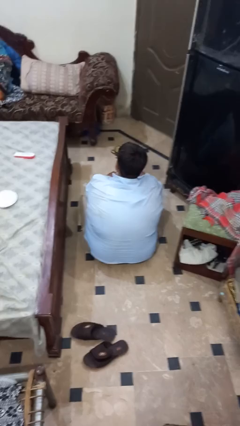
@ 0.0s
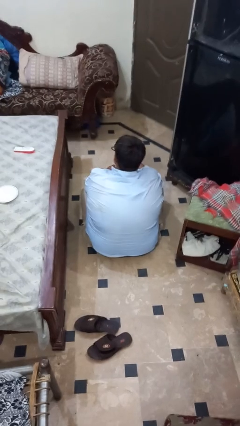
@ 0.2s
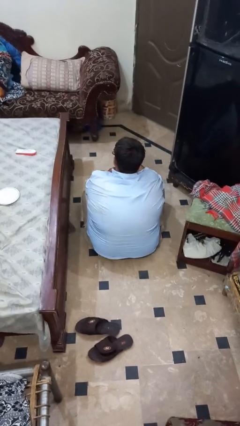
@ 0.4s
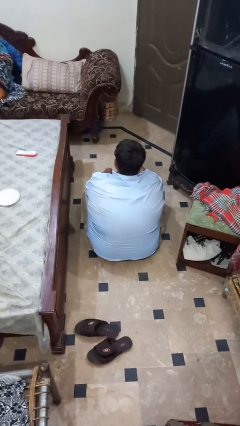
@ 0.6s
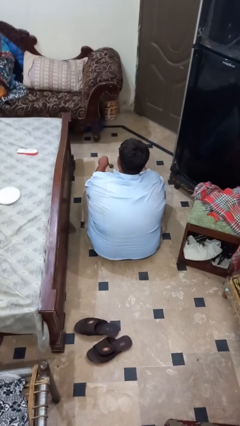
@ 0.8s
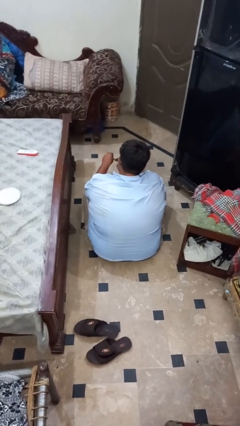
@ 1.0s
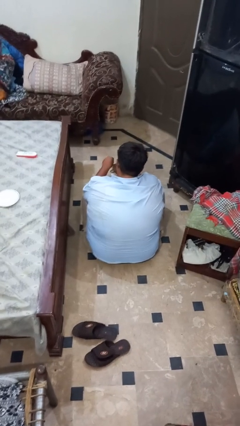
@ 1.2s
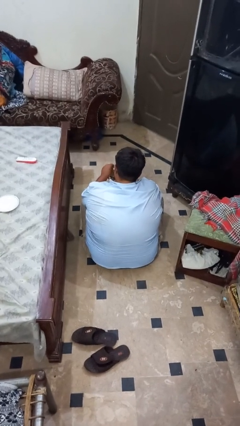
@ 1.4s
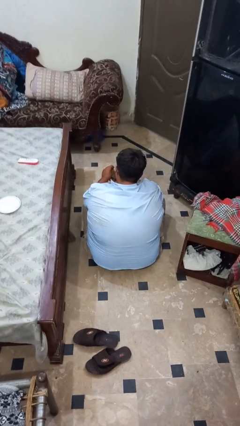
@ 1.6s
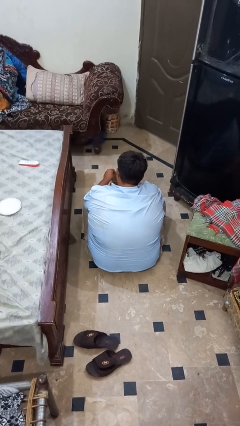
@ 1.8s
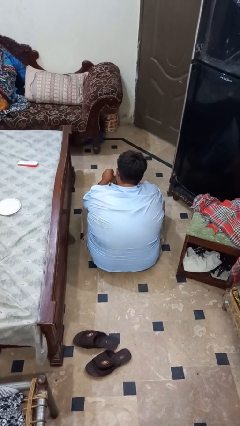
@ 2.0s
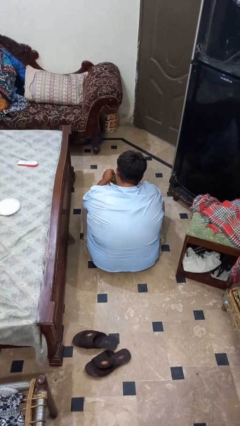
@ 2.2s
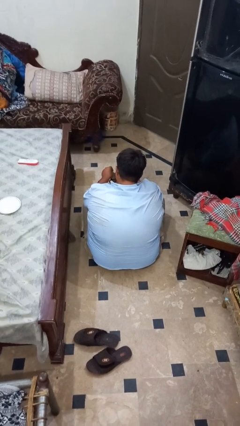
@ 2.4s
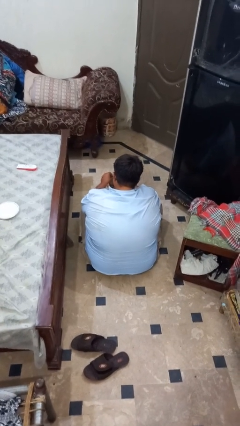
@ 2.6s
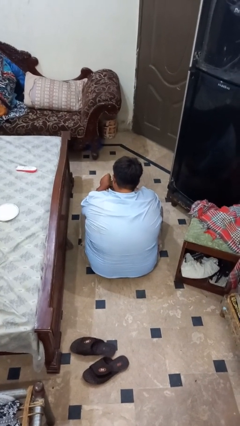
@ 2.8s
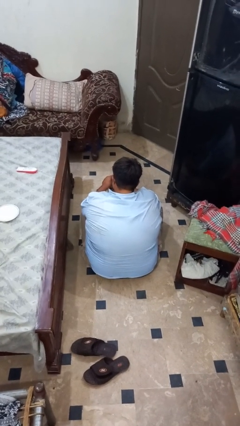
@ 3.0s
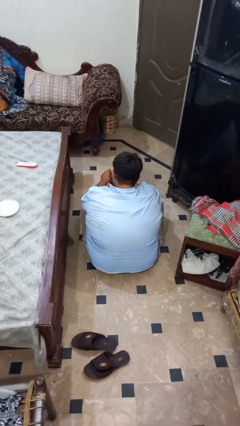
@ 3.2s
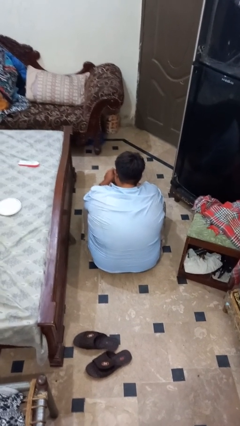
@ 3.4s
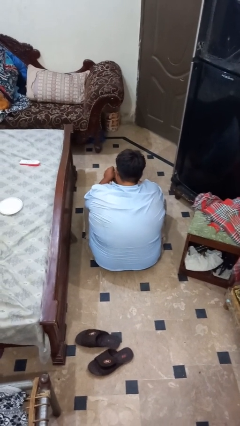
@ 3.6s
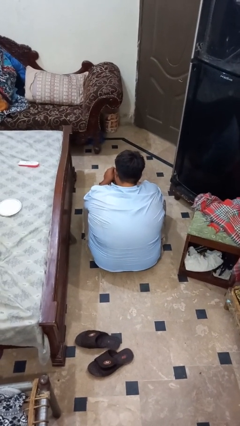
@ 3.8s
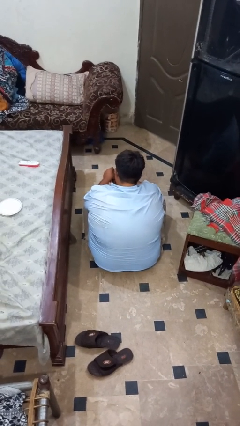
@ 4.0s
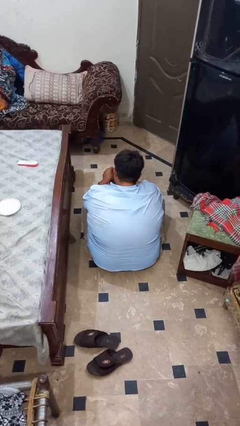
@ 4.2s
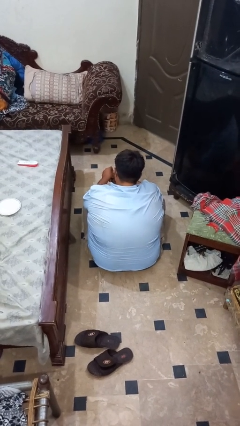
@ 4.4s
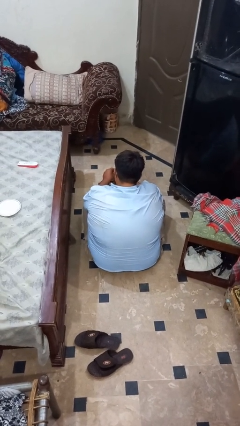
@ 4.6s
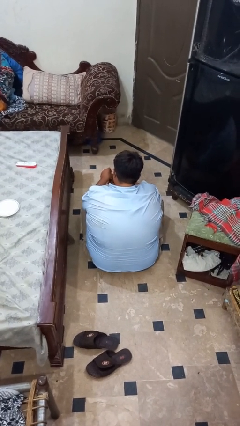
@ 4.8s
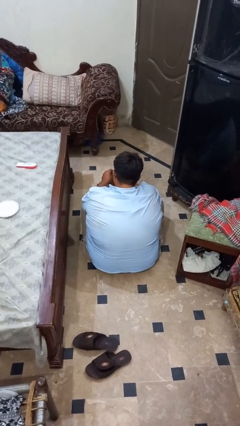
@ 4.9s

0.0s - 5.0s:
person stirs mug

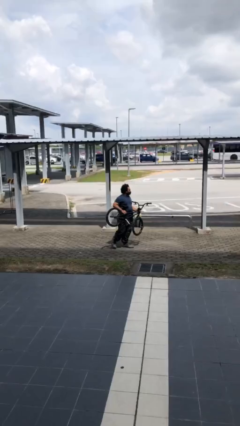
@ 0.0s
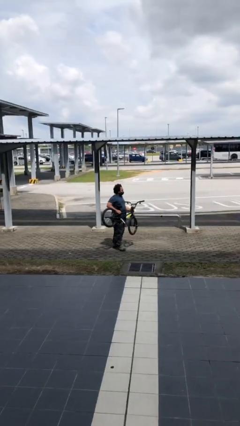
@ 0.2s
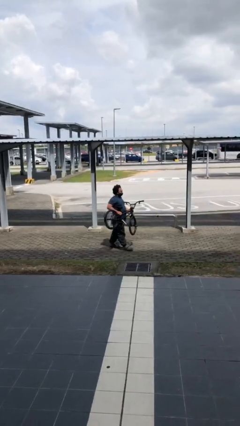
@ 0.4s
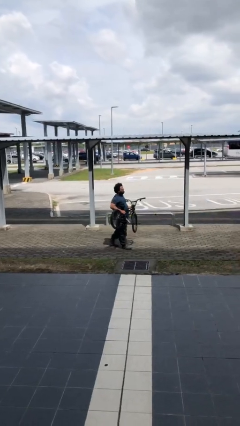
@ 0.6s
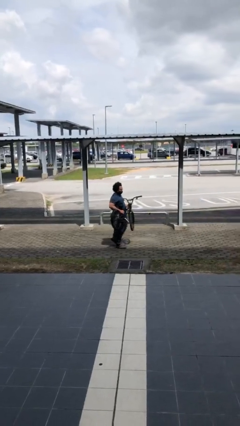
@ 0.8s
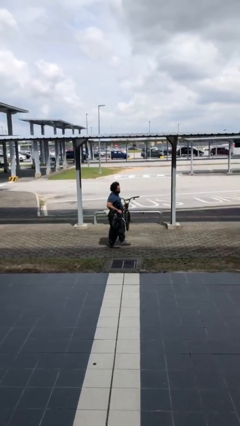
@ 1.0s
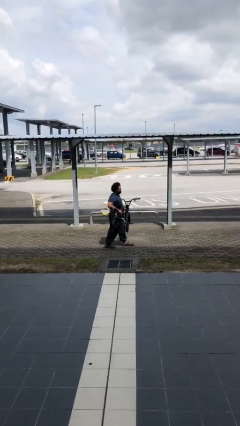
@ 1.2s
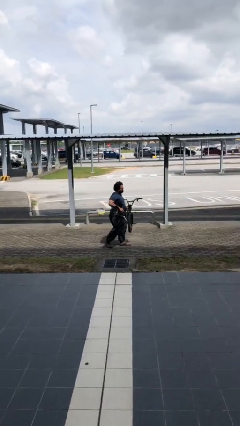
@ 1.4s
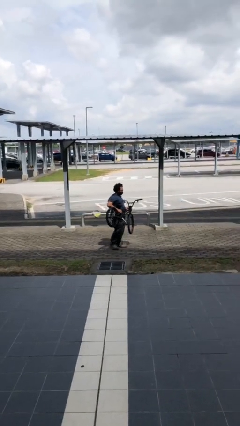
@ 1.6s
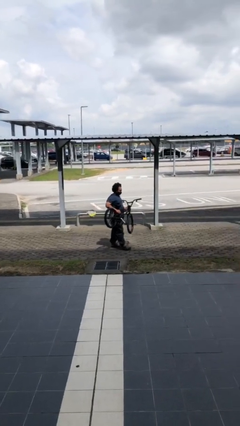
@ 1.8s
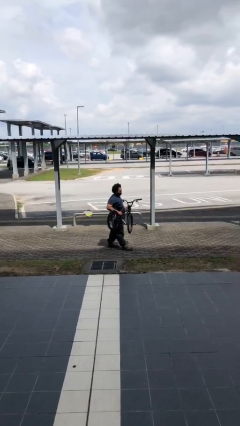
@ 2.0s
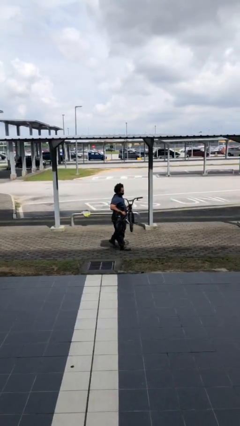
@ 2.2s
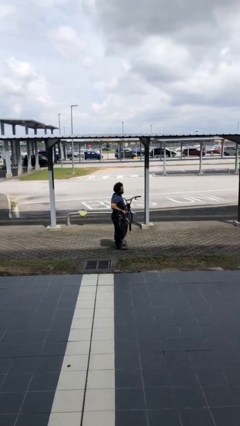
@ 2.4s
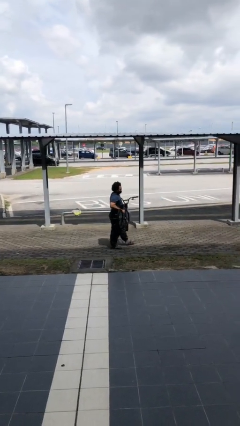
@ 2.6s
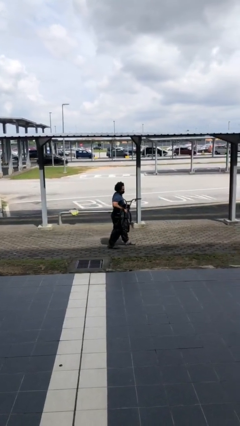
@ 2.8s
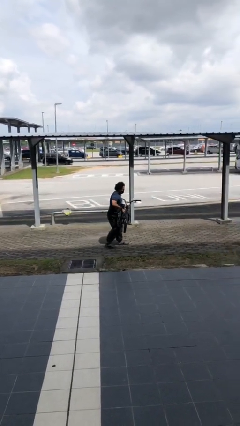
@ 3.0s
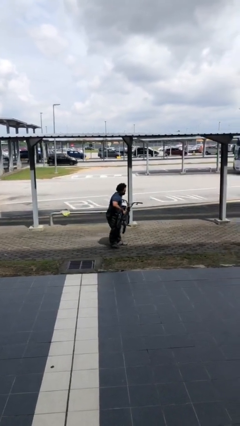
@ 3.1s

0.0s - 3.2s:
person carries heavy object

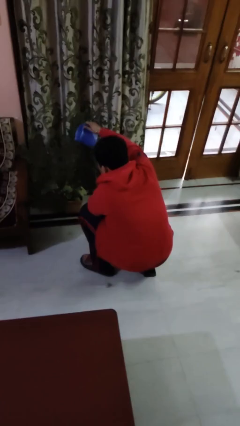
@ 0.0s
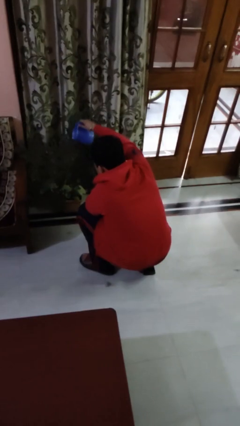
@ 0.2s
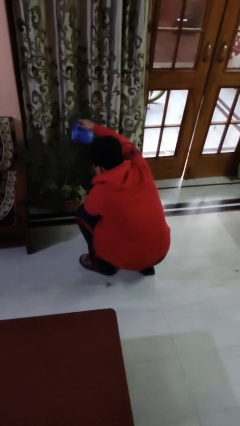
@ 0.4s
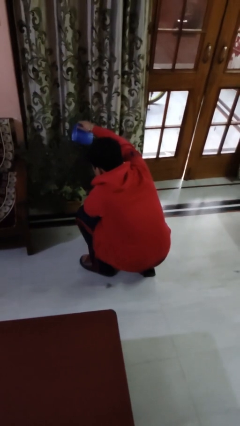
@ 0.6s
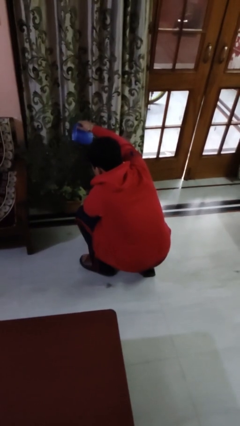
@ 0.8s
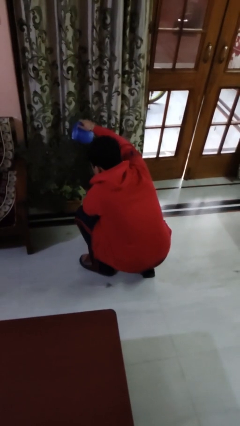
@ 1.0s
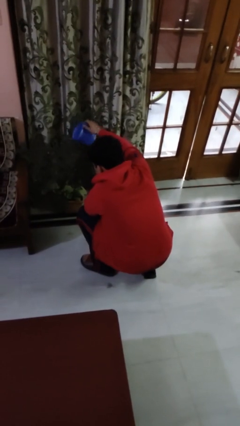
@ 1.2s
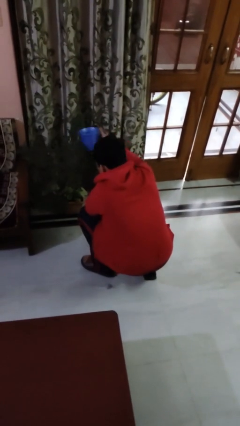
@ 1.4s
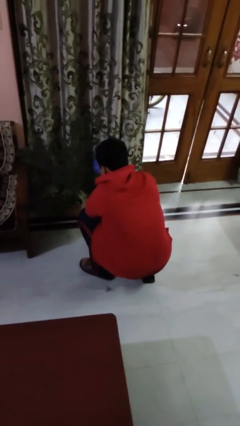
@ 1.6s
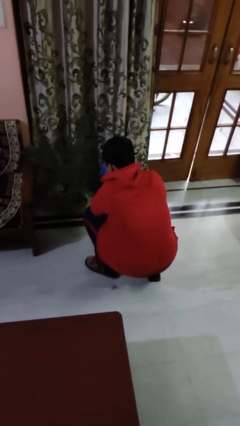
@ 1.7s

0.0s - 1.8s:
person waters houseplant

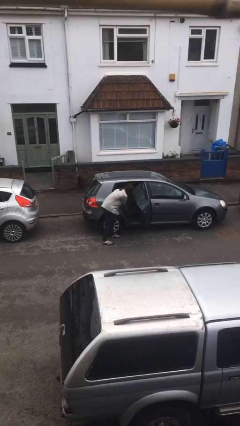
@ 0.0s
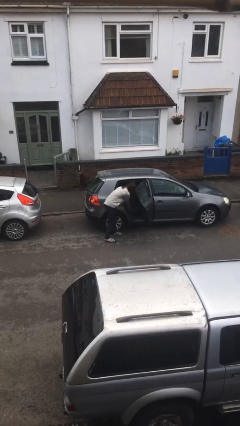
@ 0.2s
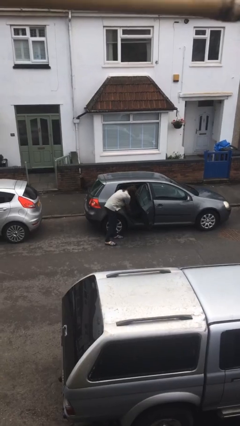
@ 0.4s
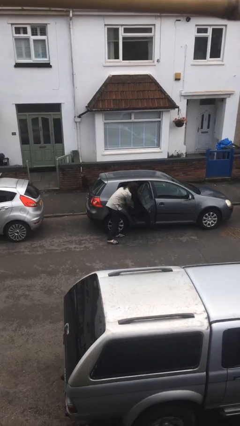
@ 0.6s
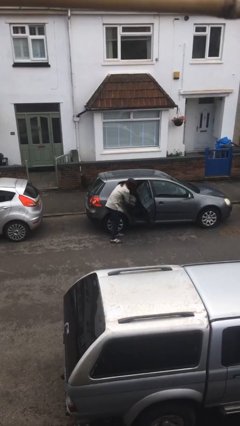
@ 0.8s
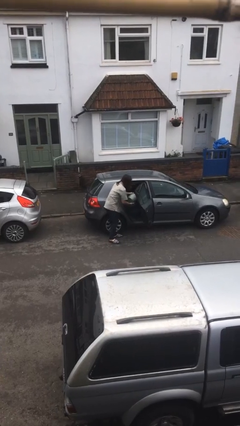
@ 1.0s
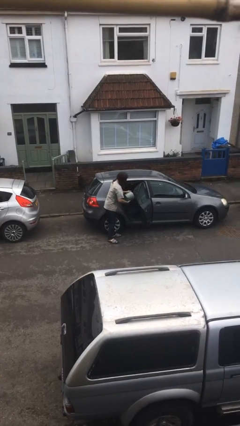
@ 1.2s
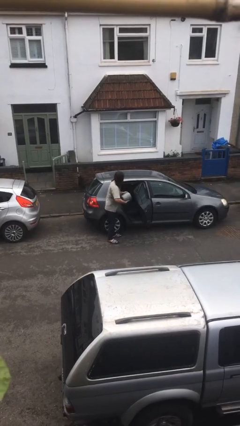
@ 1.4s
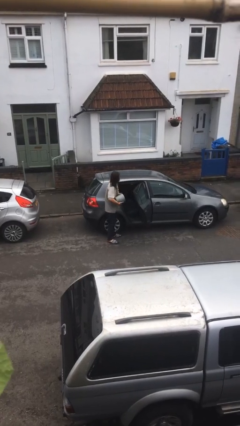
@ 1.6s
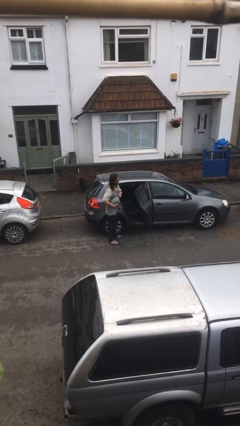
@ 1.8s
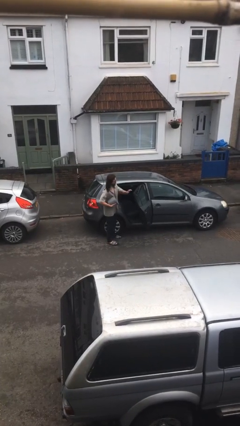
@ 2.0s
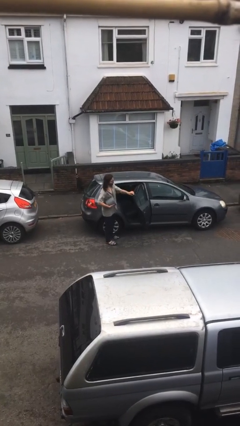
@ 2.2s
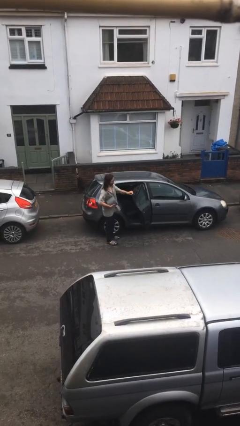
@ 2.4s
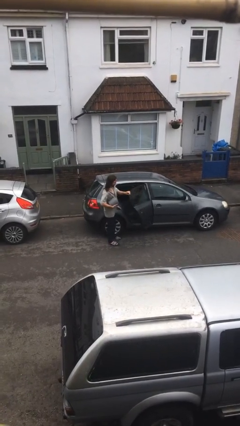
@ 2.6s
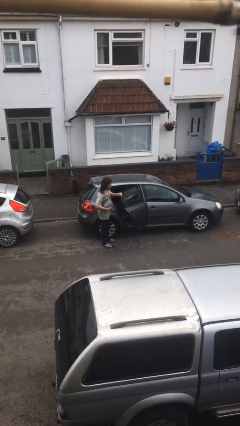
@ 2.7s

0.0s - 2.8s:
person unloads car

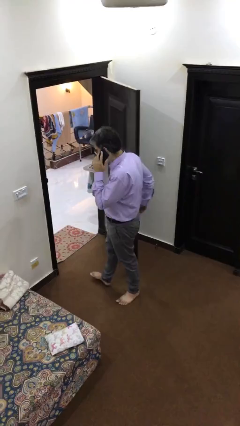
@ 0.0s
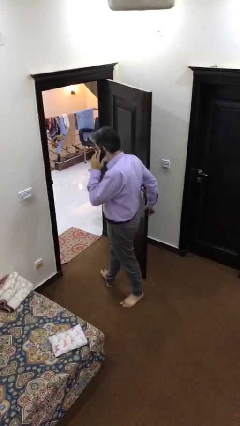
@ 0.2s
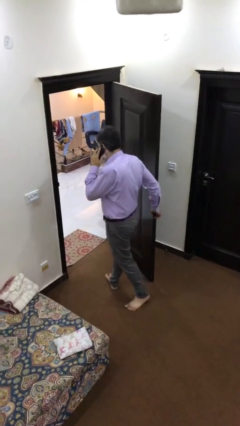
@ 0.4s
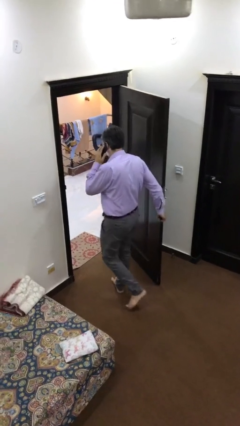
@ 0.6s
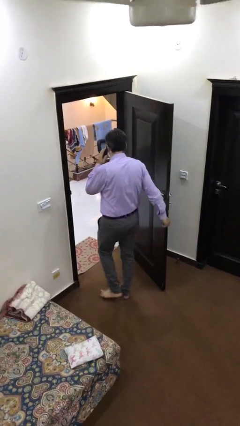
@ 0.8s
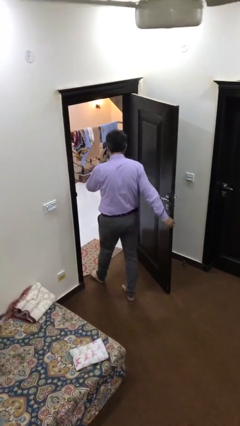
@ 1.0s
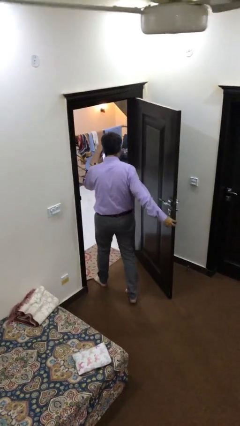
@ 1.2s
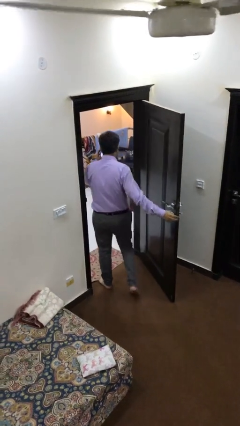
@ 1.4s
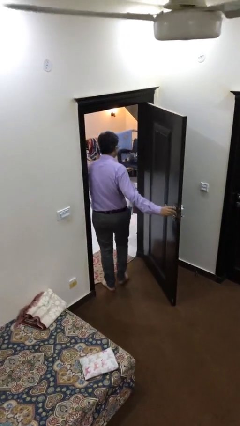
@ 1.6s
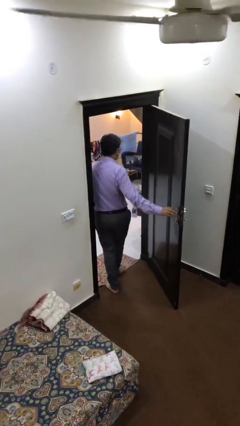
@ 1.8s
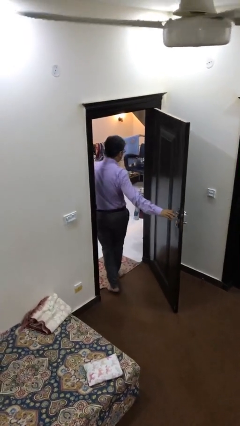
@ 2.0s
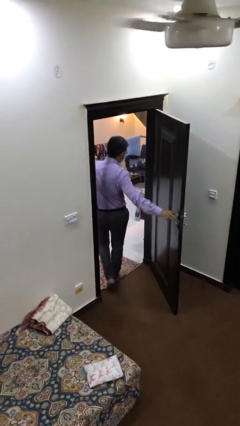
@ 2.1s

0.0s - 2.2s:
person exits scene through structure

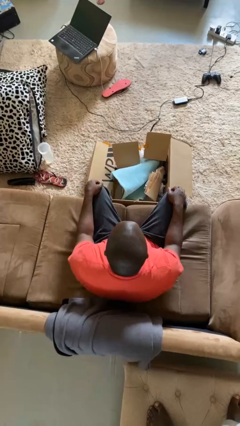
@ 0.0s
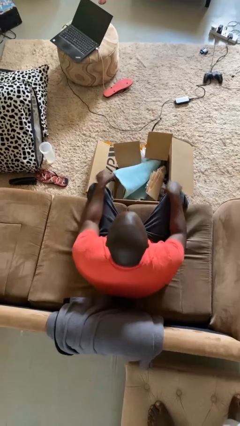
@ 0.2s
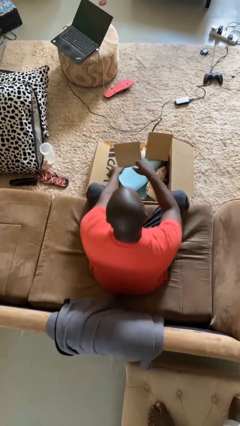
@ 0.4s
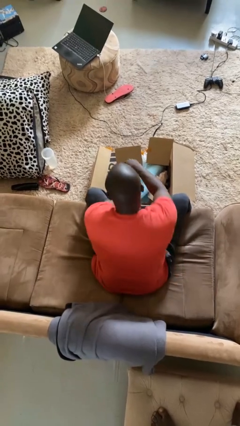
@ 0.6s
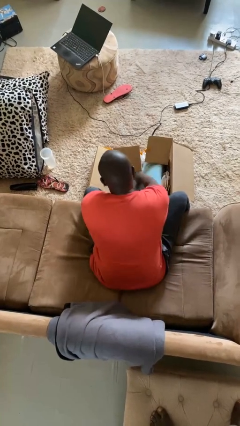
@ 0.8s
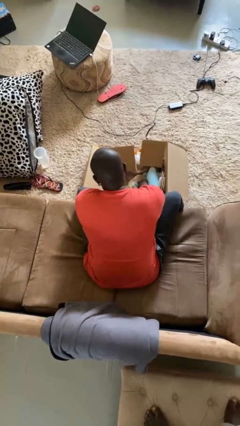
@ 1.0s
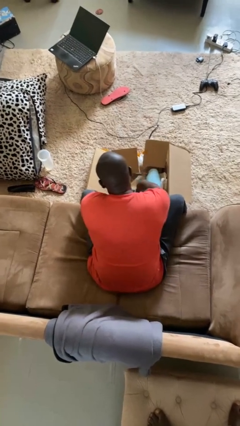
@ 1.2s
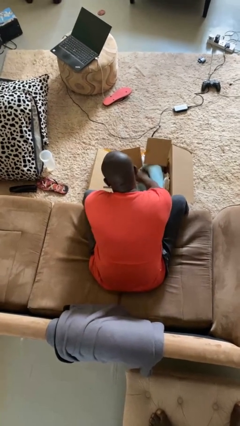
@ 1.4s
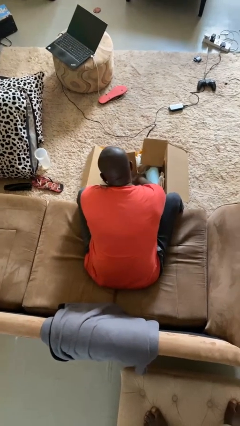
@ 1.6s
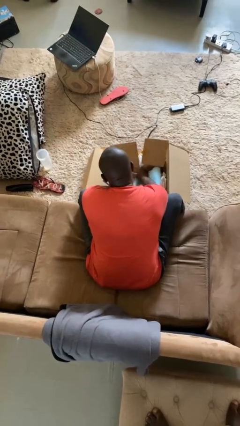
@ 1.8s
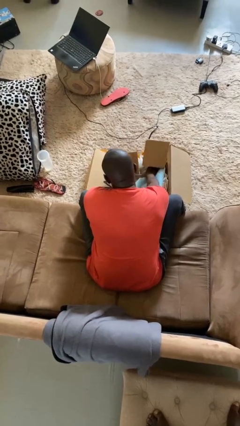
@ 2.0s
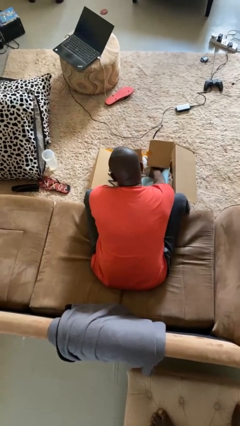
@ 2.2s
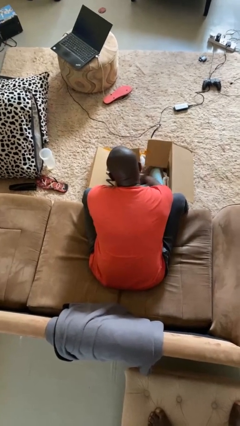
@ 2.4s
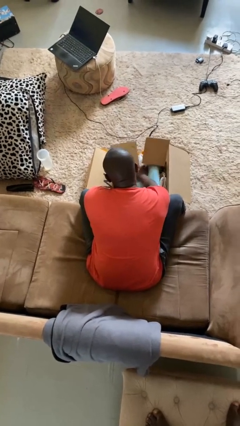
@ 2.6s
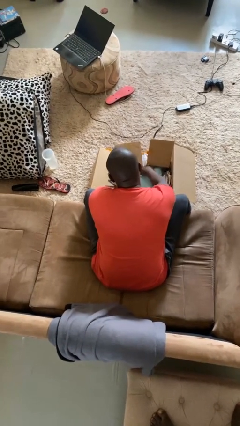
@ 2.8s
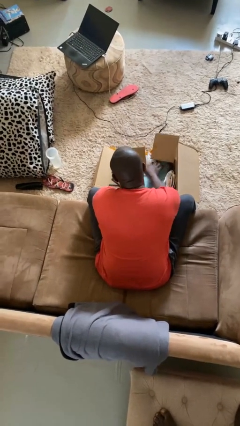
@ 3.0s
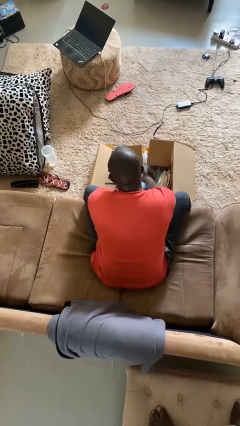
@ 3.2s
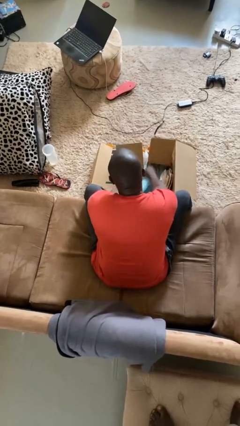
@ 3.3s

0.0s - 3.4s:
person searches in box
